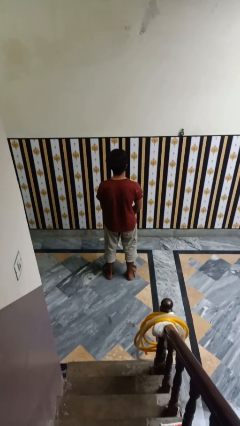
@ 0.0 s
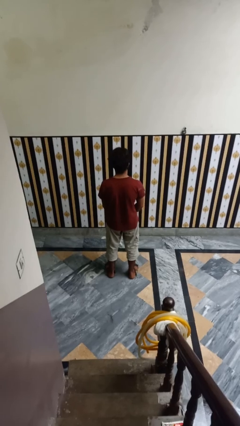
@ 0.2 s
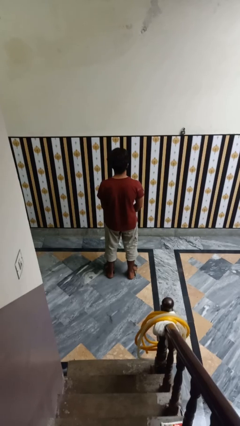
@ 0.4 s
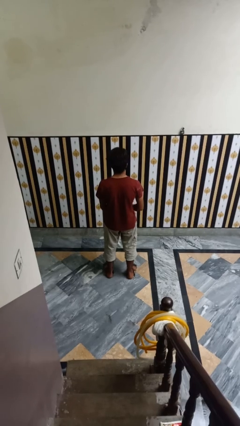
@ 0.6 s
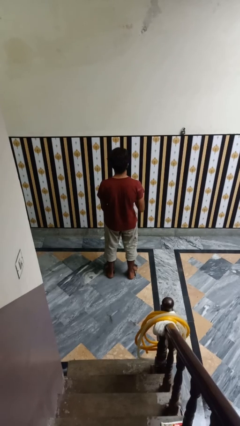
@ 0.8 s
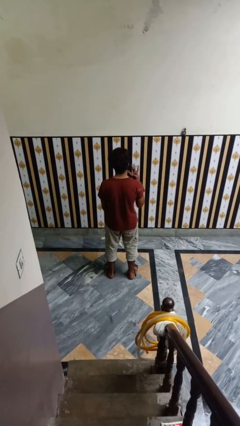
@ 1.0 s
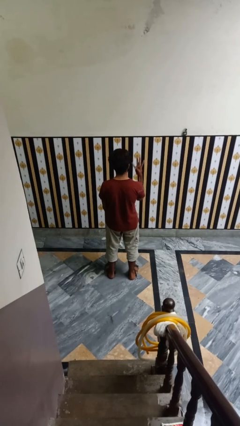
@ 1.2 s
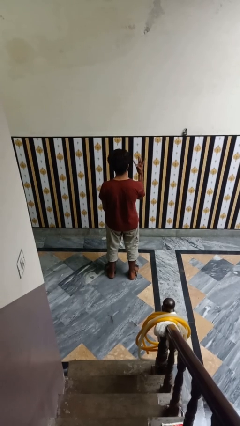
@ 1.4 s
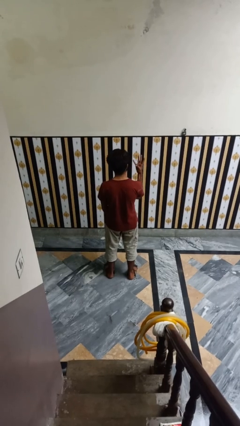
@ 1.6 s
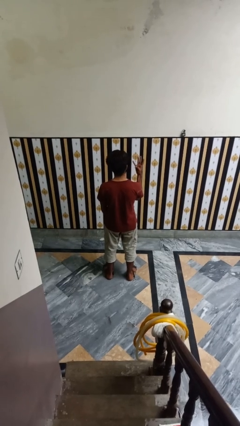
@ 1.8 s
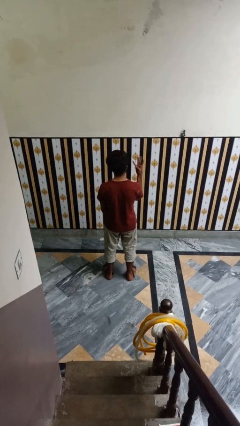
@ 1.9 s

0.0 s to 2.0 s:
person gestures number four

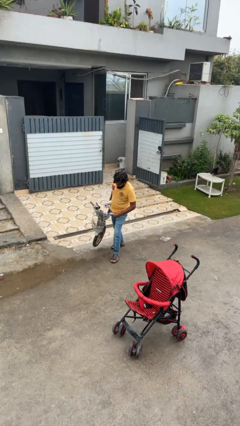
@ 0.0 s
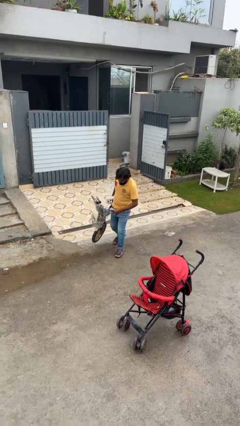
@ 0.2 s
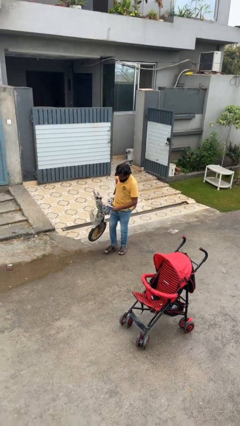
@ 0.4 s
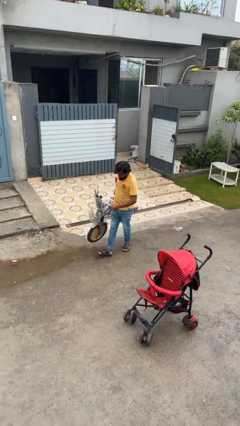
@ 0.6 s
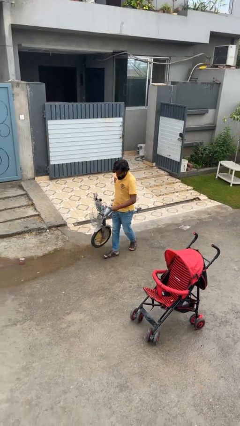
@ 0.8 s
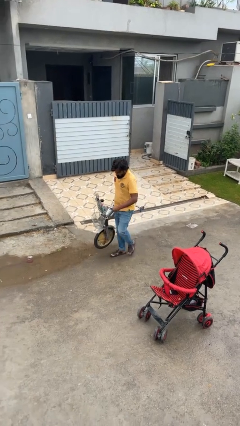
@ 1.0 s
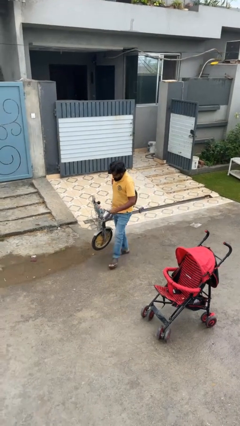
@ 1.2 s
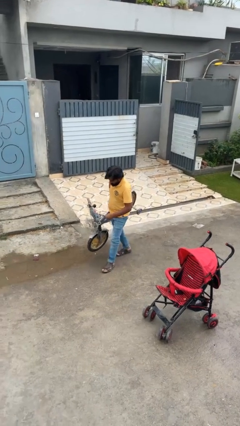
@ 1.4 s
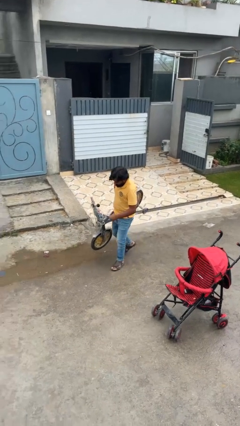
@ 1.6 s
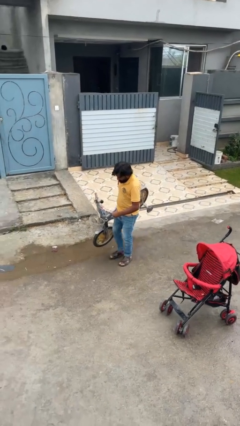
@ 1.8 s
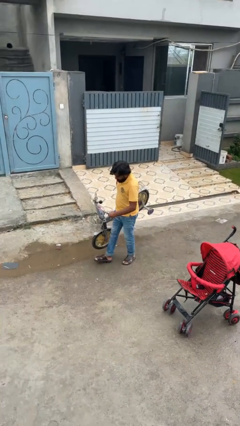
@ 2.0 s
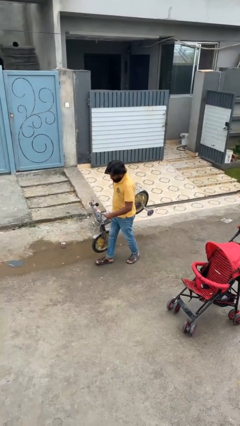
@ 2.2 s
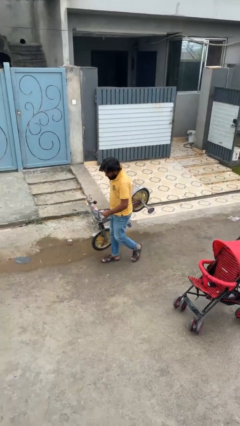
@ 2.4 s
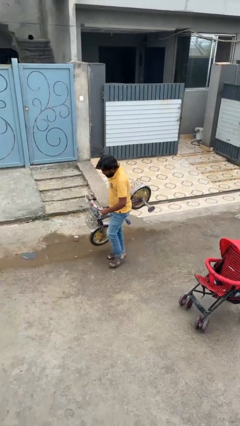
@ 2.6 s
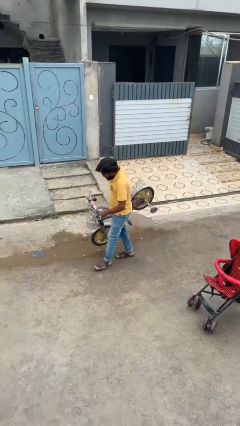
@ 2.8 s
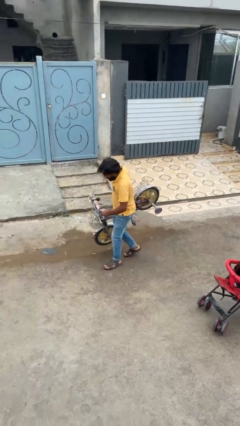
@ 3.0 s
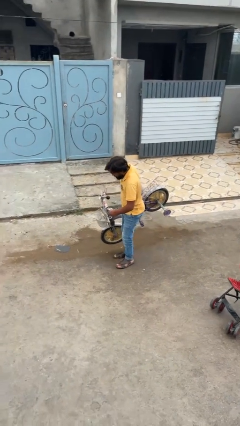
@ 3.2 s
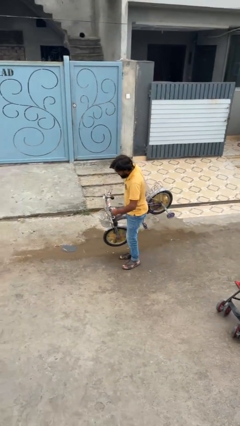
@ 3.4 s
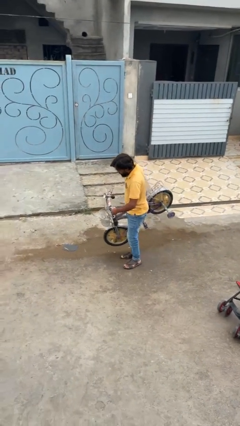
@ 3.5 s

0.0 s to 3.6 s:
person carries bicycle

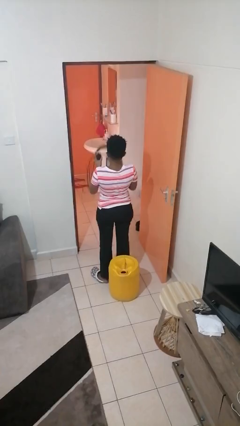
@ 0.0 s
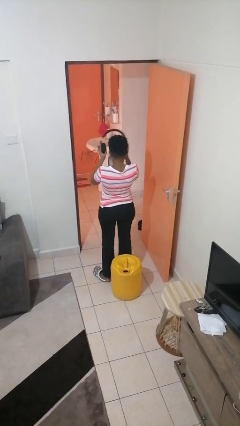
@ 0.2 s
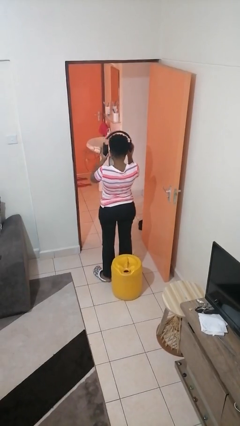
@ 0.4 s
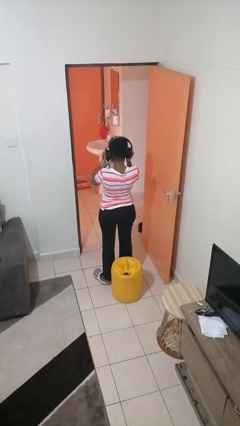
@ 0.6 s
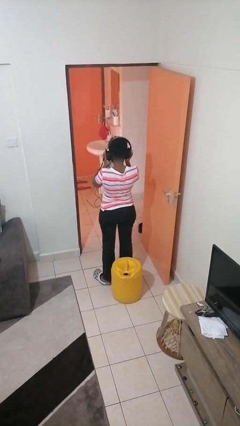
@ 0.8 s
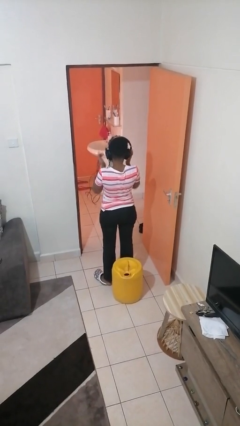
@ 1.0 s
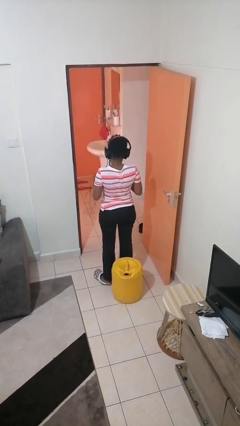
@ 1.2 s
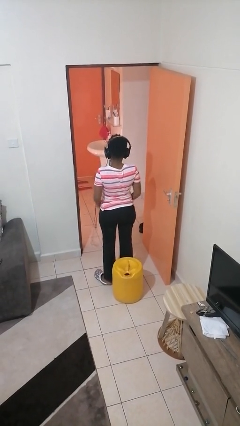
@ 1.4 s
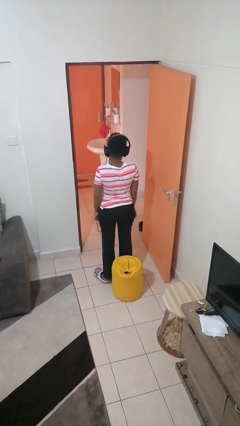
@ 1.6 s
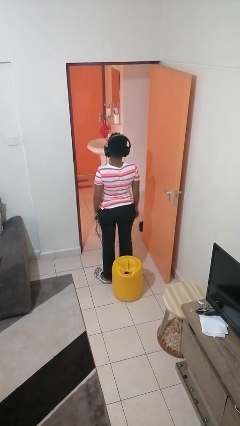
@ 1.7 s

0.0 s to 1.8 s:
person puts on headphones

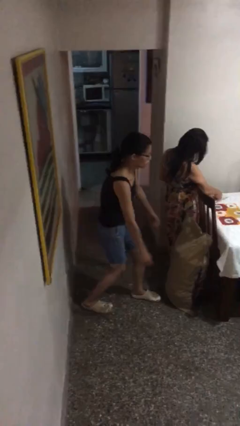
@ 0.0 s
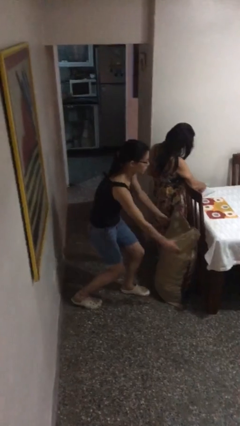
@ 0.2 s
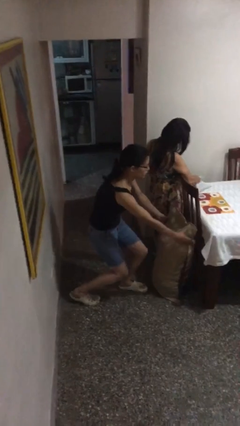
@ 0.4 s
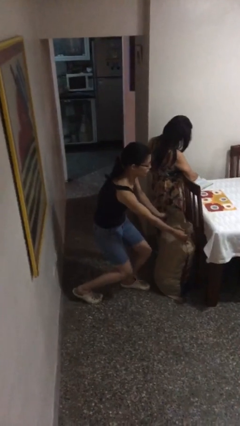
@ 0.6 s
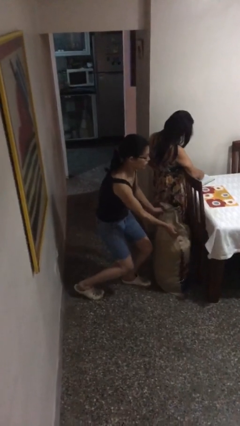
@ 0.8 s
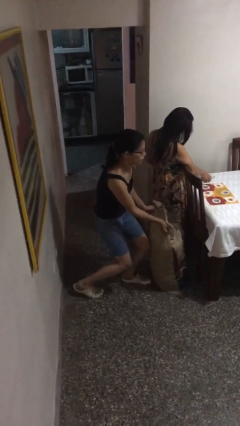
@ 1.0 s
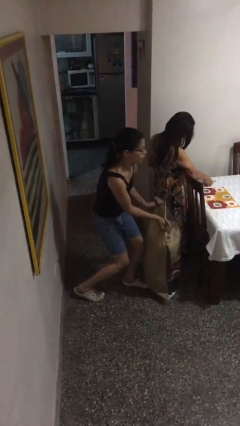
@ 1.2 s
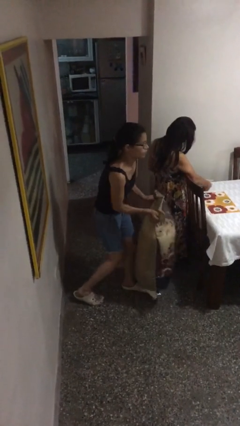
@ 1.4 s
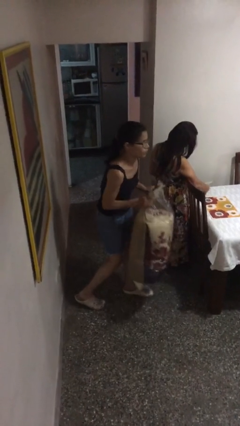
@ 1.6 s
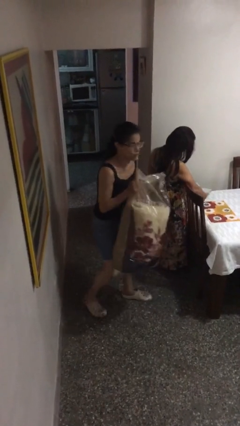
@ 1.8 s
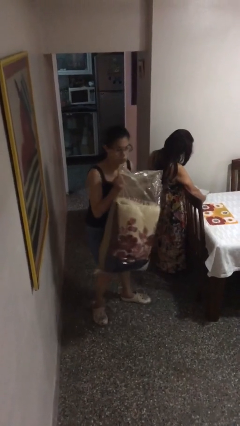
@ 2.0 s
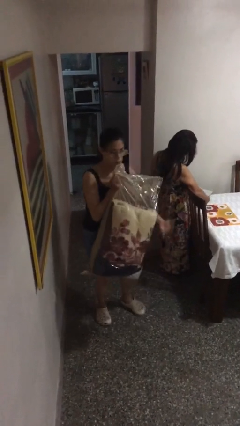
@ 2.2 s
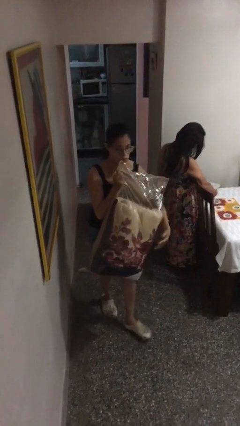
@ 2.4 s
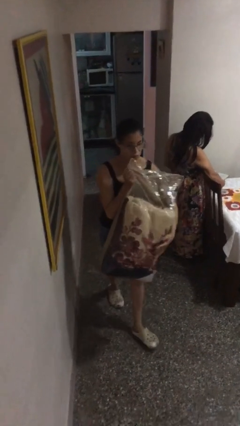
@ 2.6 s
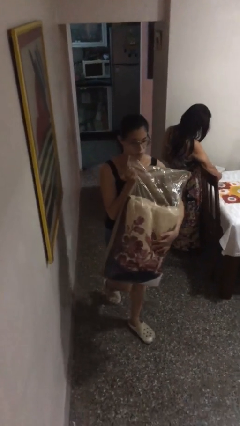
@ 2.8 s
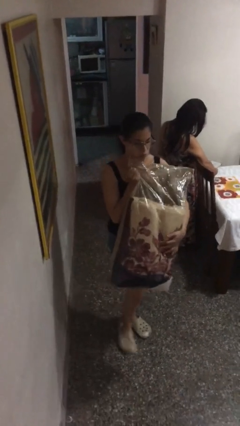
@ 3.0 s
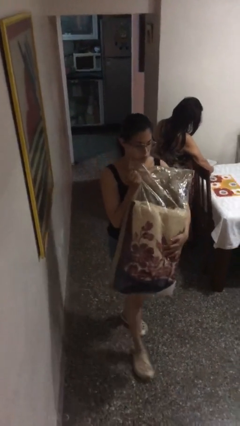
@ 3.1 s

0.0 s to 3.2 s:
person steals object from person

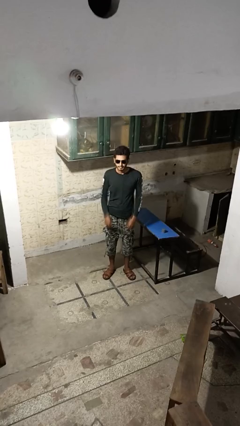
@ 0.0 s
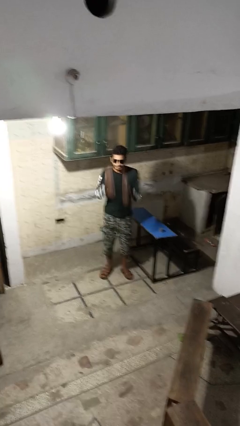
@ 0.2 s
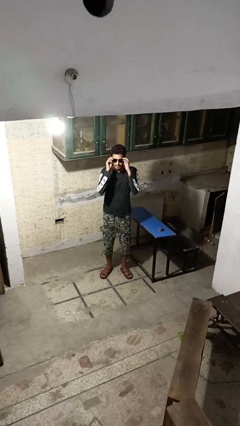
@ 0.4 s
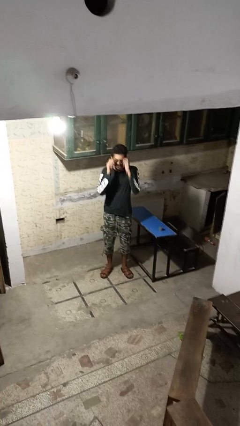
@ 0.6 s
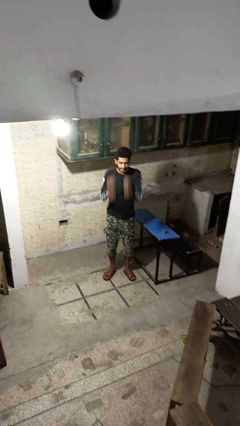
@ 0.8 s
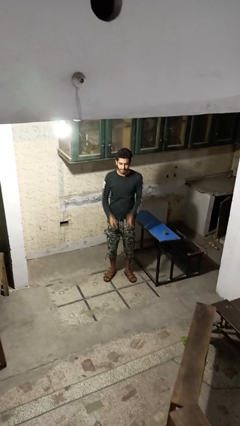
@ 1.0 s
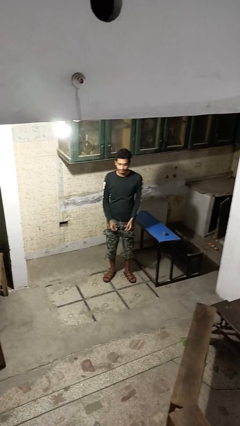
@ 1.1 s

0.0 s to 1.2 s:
person takes off sunglasses

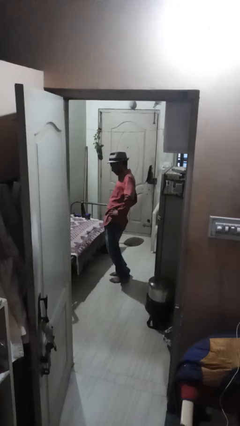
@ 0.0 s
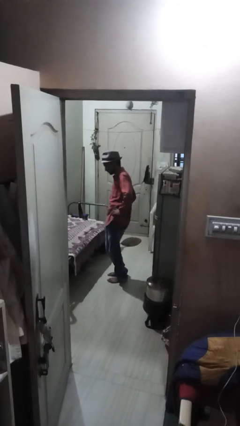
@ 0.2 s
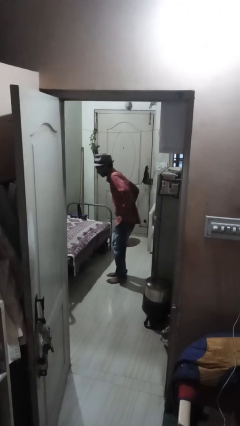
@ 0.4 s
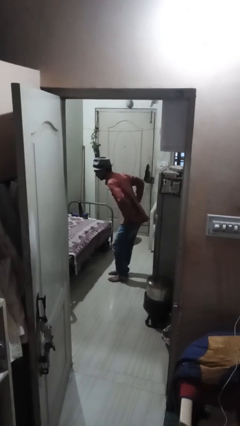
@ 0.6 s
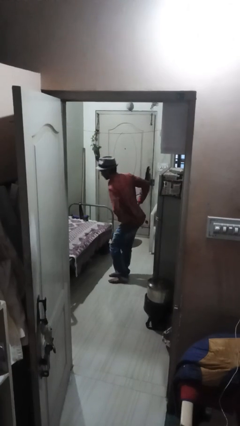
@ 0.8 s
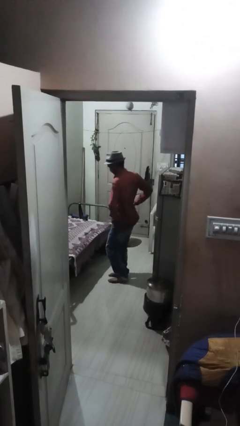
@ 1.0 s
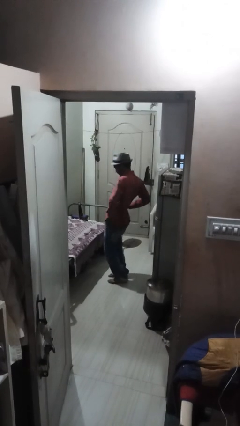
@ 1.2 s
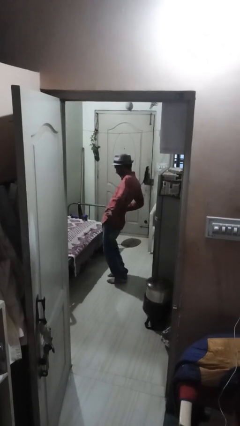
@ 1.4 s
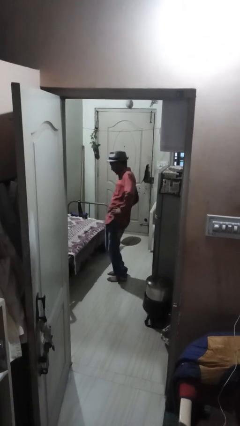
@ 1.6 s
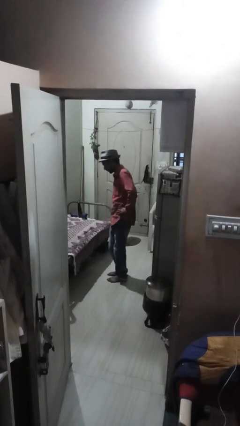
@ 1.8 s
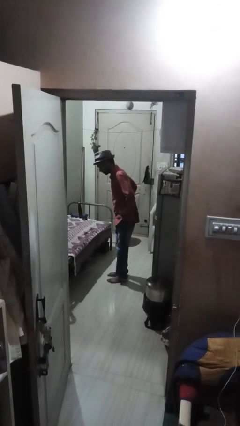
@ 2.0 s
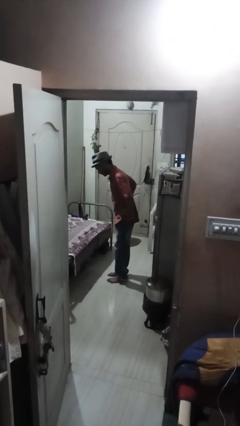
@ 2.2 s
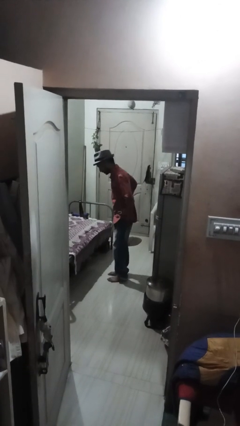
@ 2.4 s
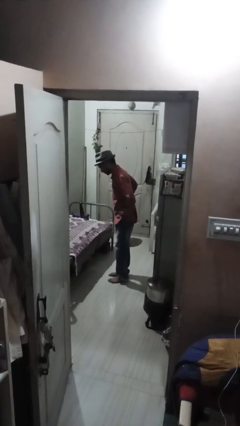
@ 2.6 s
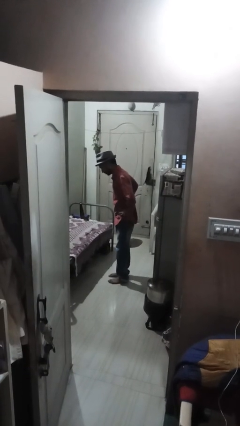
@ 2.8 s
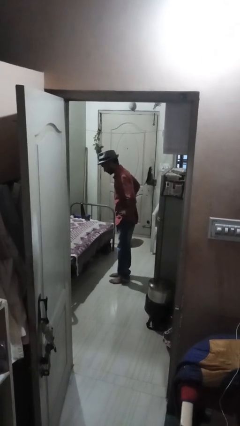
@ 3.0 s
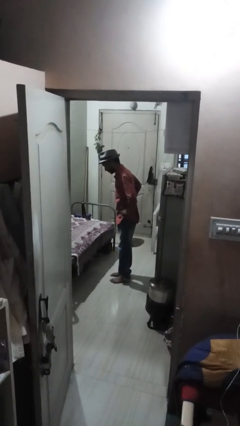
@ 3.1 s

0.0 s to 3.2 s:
person wiggles hips

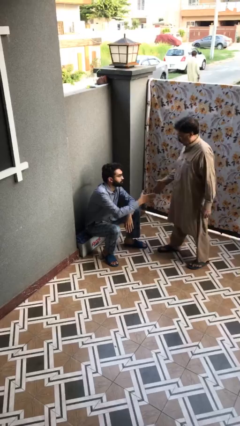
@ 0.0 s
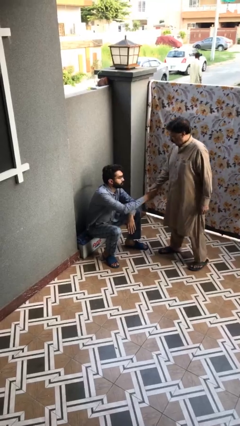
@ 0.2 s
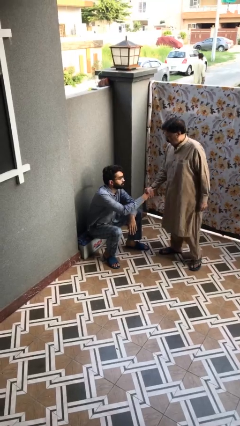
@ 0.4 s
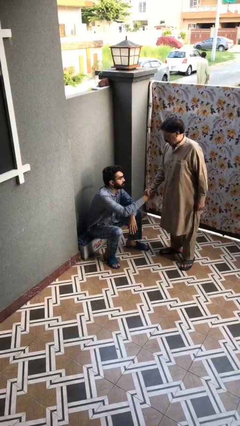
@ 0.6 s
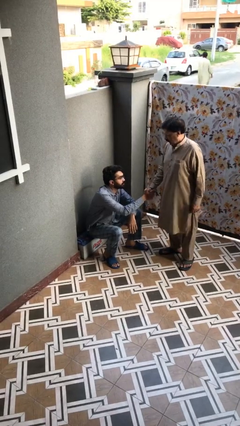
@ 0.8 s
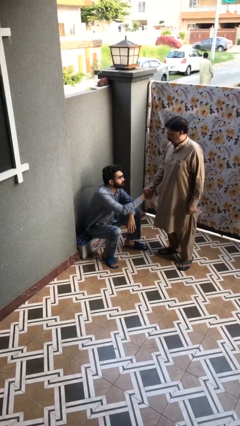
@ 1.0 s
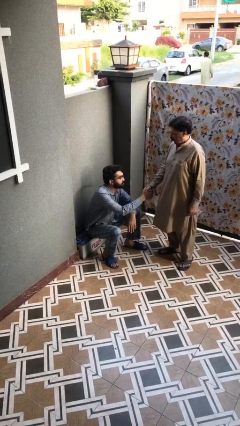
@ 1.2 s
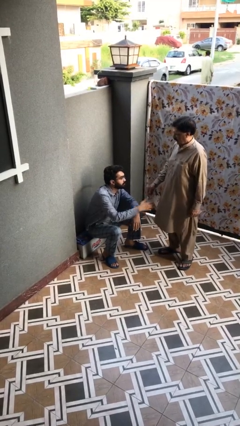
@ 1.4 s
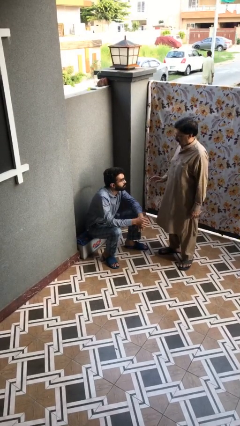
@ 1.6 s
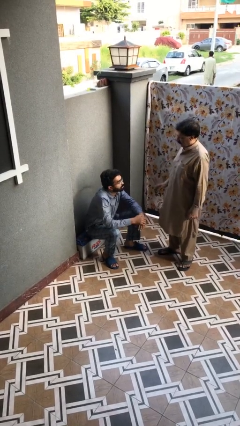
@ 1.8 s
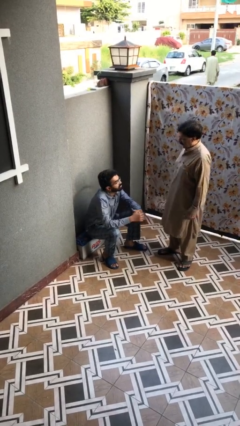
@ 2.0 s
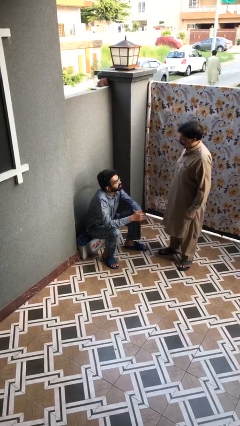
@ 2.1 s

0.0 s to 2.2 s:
person shakes hand
